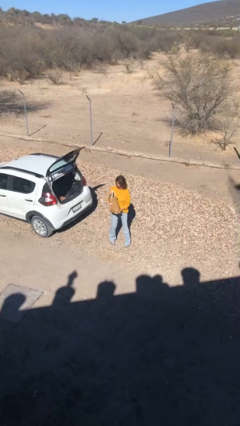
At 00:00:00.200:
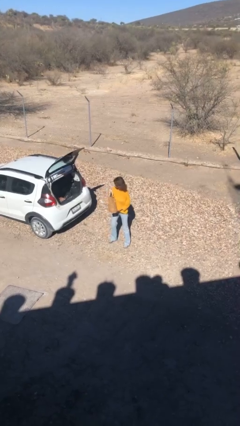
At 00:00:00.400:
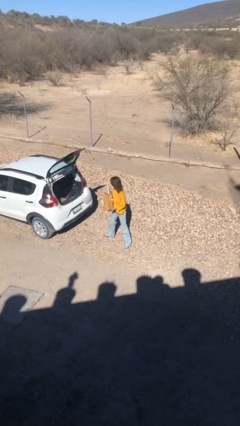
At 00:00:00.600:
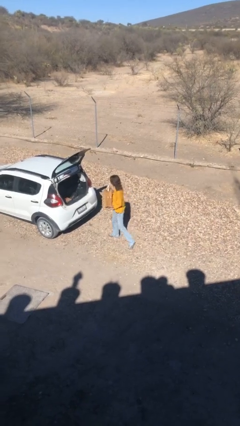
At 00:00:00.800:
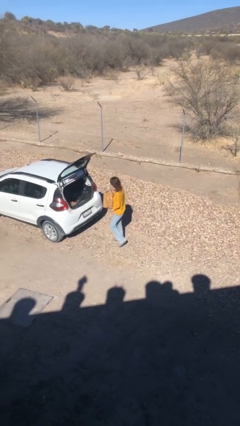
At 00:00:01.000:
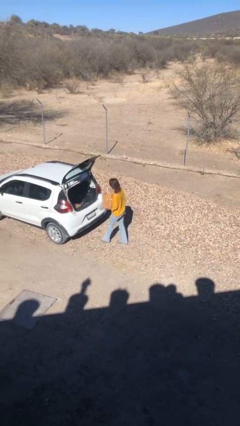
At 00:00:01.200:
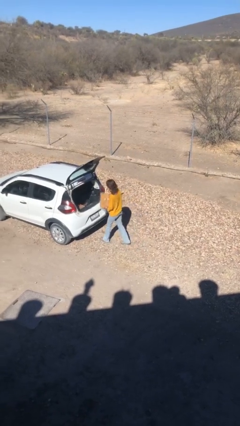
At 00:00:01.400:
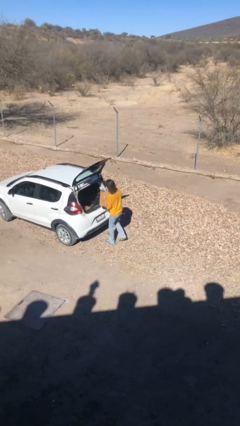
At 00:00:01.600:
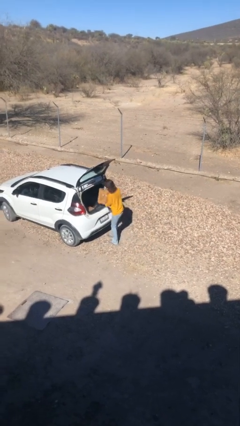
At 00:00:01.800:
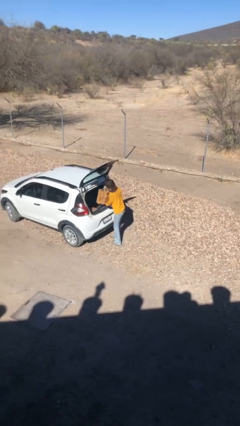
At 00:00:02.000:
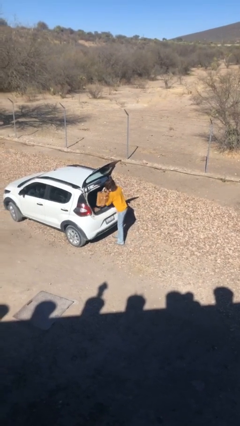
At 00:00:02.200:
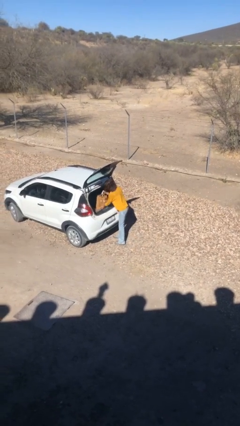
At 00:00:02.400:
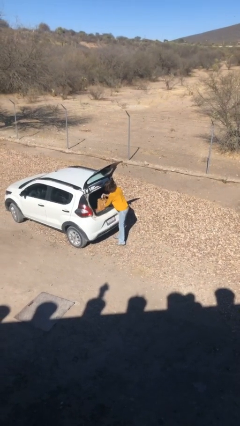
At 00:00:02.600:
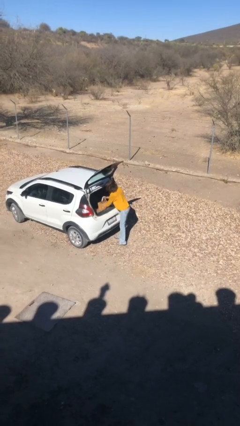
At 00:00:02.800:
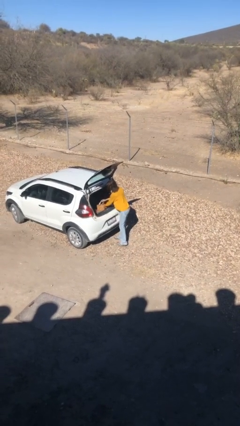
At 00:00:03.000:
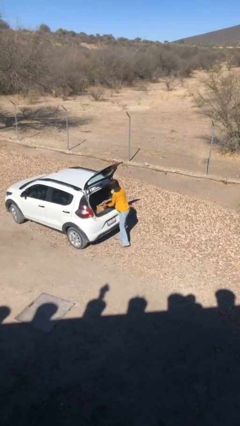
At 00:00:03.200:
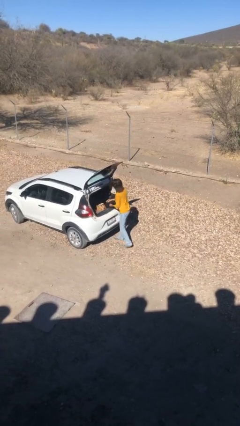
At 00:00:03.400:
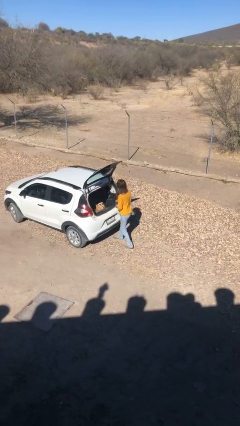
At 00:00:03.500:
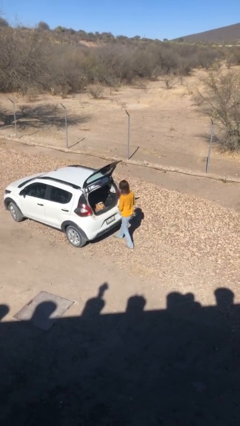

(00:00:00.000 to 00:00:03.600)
person loads car

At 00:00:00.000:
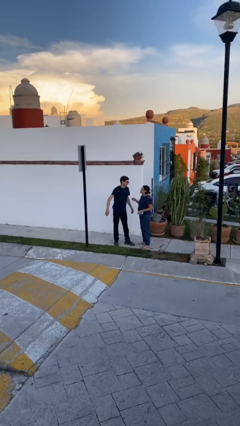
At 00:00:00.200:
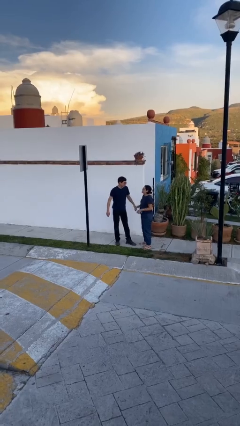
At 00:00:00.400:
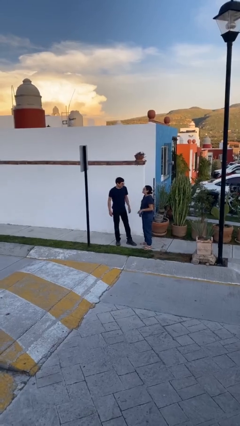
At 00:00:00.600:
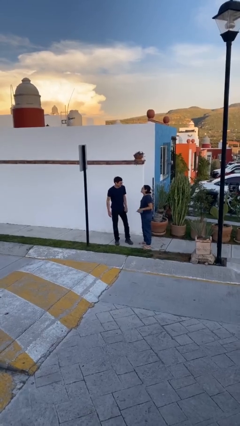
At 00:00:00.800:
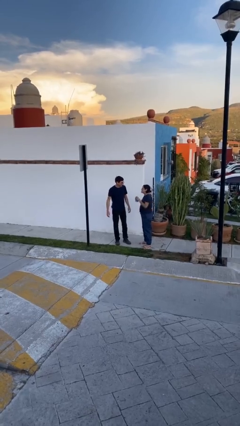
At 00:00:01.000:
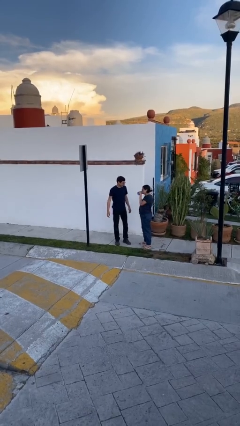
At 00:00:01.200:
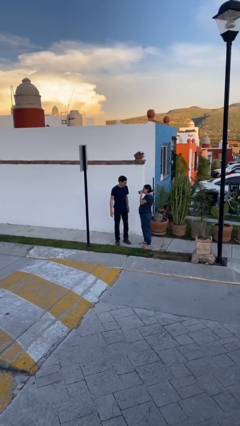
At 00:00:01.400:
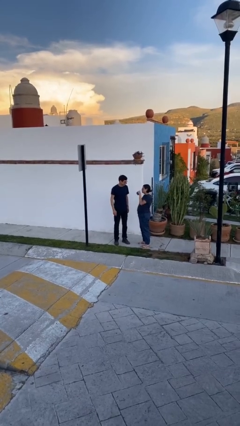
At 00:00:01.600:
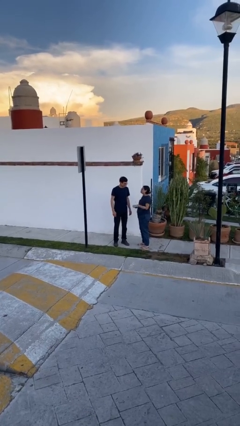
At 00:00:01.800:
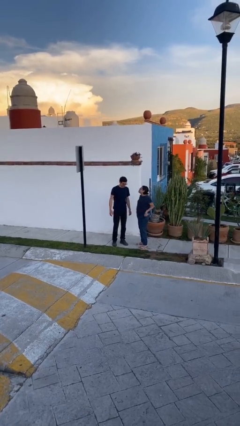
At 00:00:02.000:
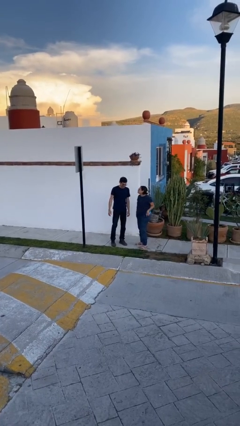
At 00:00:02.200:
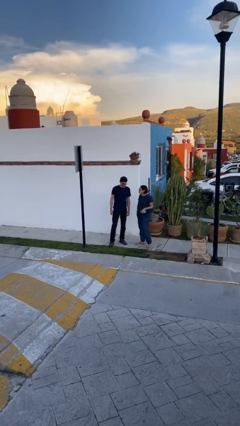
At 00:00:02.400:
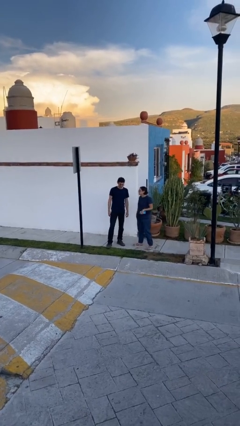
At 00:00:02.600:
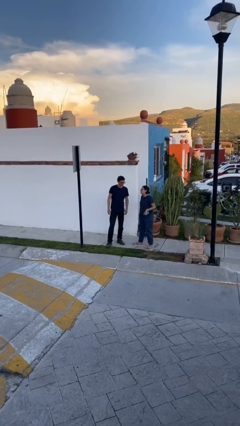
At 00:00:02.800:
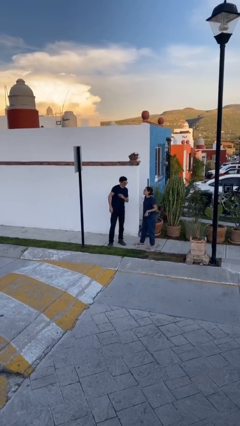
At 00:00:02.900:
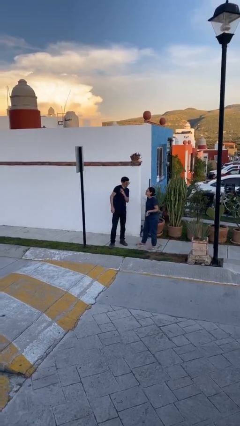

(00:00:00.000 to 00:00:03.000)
person talks to person

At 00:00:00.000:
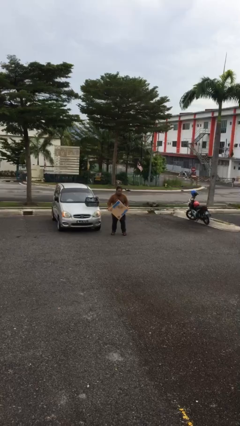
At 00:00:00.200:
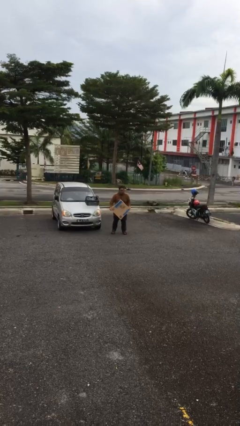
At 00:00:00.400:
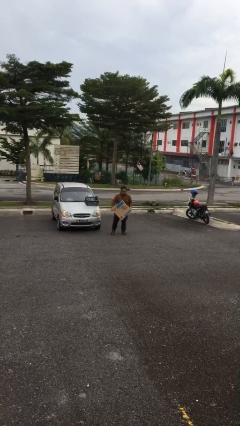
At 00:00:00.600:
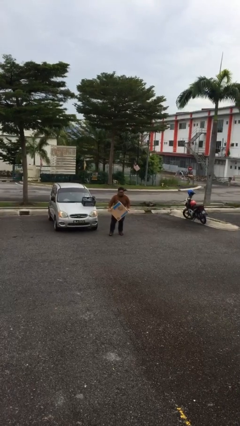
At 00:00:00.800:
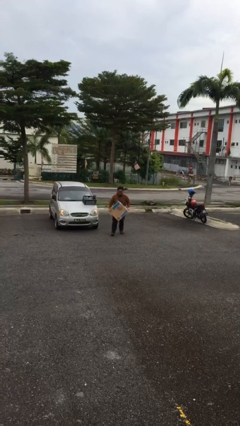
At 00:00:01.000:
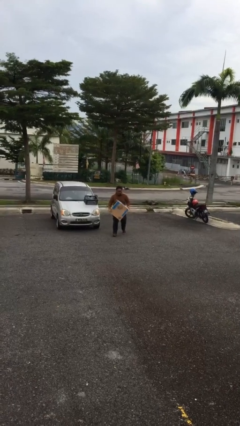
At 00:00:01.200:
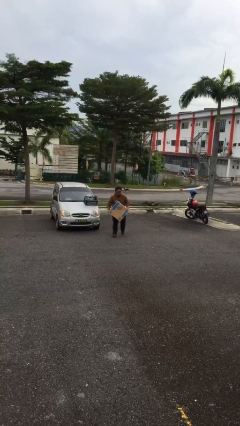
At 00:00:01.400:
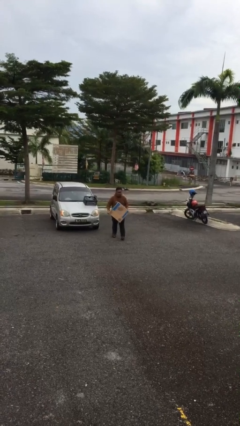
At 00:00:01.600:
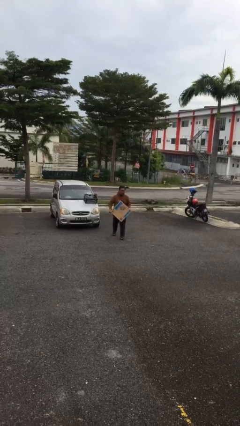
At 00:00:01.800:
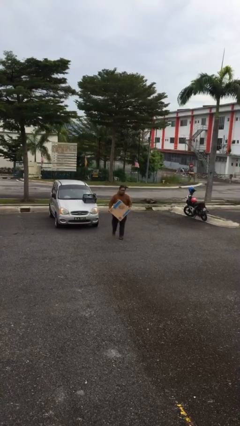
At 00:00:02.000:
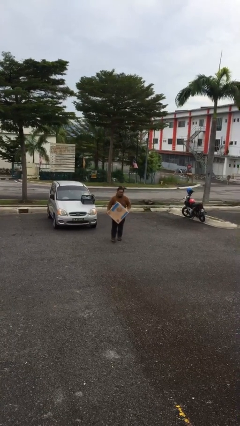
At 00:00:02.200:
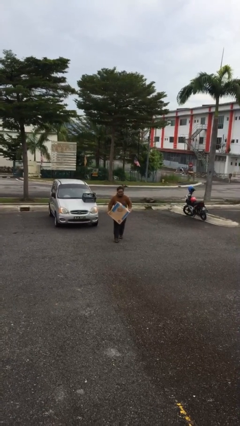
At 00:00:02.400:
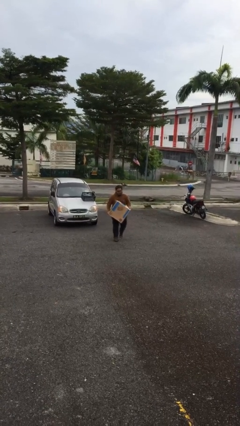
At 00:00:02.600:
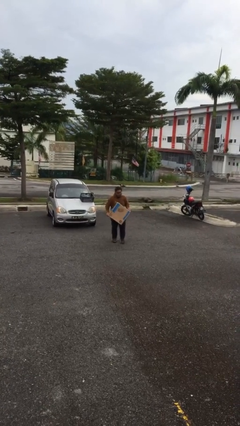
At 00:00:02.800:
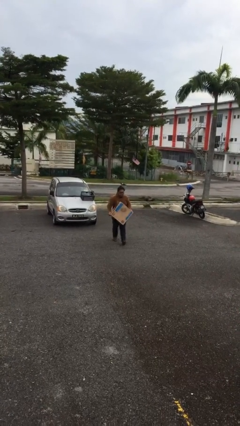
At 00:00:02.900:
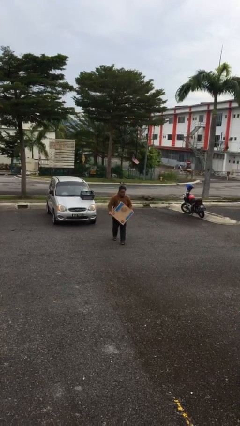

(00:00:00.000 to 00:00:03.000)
person carries heavy object

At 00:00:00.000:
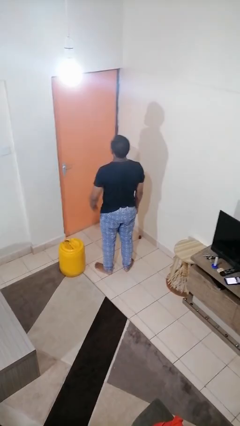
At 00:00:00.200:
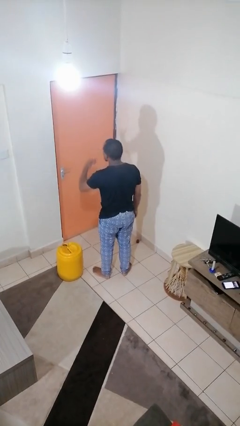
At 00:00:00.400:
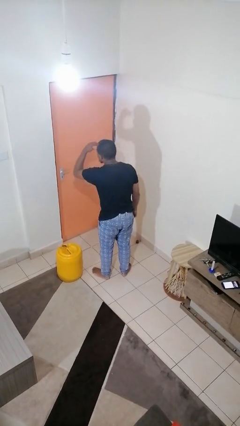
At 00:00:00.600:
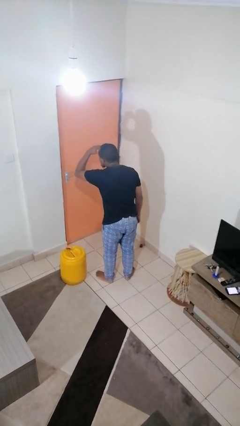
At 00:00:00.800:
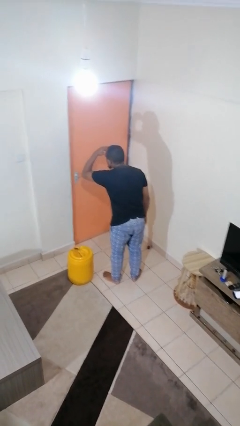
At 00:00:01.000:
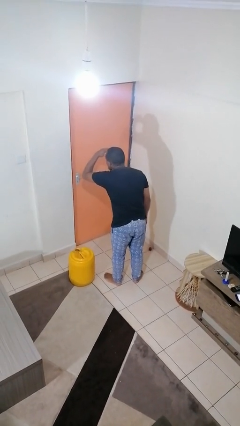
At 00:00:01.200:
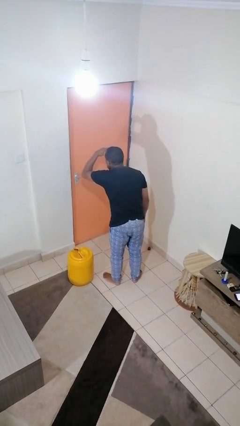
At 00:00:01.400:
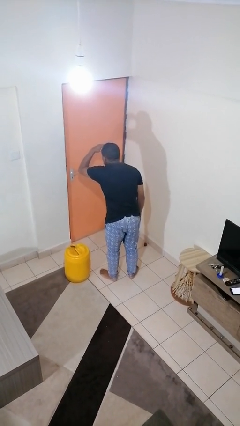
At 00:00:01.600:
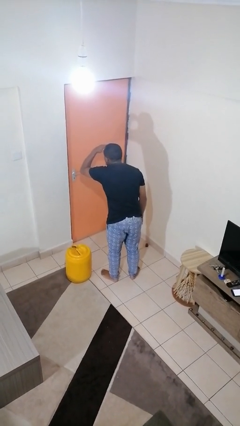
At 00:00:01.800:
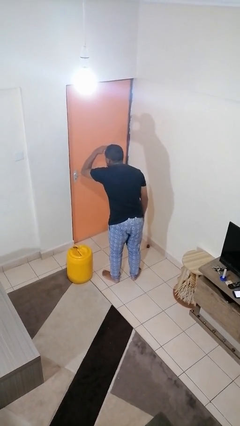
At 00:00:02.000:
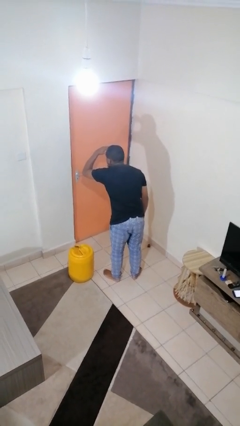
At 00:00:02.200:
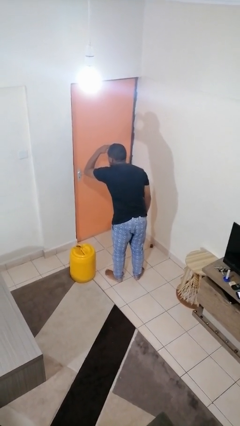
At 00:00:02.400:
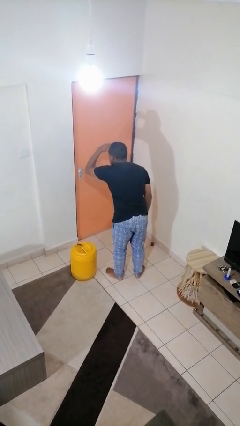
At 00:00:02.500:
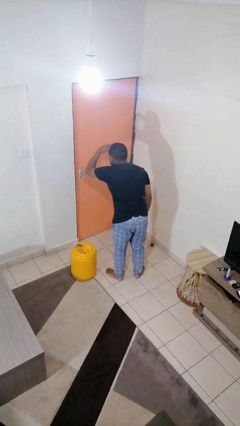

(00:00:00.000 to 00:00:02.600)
person shades eyes

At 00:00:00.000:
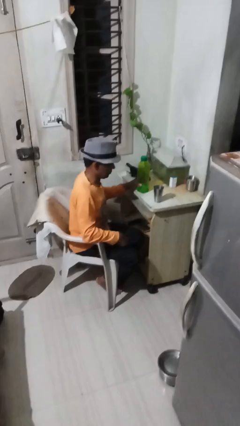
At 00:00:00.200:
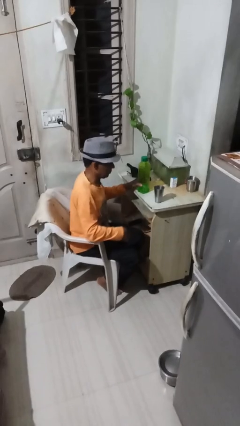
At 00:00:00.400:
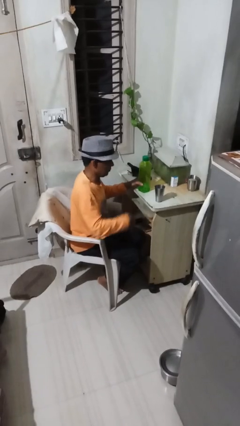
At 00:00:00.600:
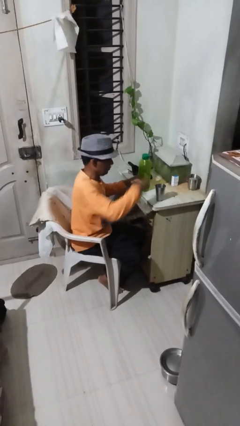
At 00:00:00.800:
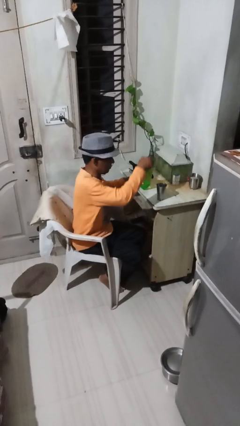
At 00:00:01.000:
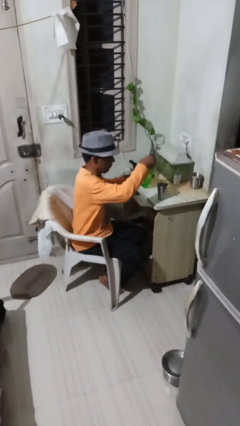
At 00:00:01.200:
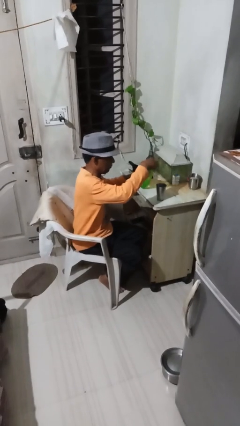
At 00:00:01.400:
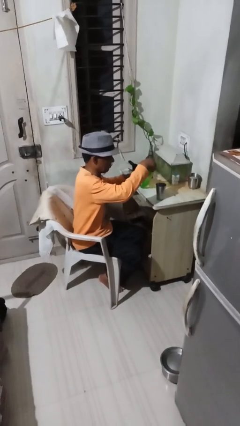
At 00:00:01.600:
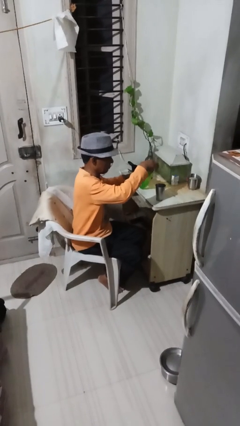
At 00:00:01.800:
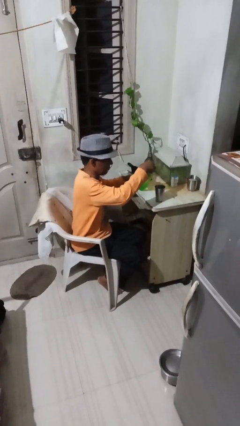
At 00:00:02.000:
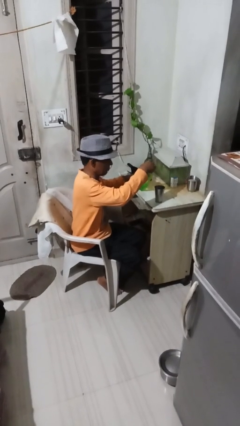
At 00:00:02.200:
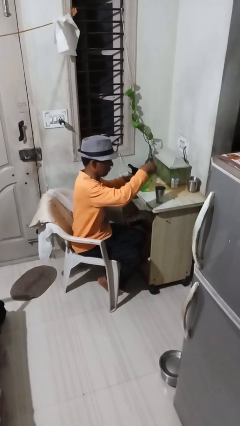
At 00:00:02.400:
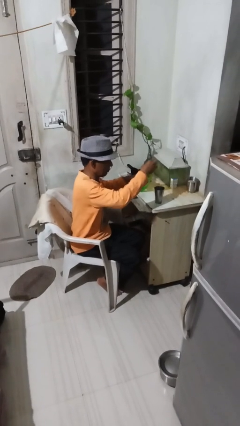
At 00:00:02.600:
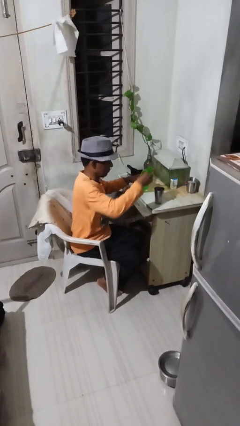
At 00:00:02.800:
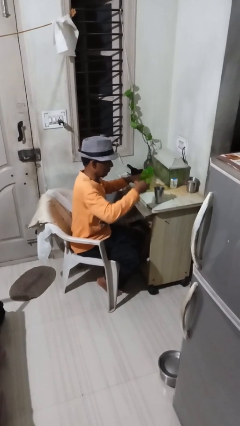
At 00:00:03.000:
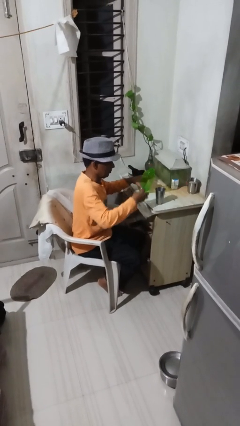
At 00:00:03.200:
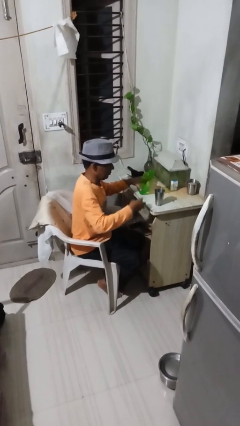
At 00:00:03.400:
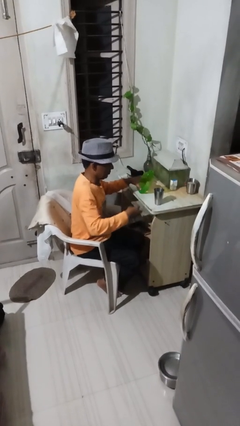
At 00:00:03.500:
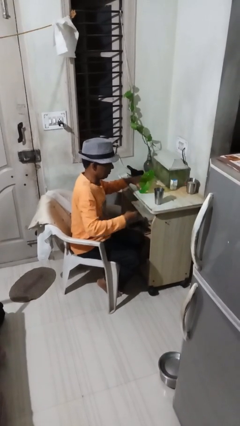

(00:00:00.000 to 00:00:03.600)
person unscrews lid from bottle

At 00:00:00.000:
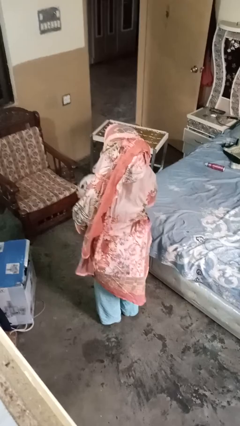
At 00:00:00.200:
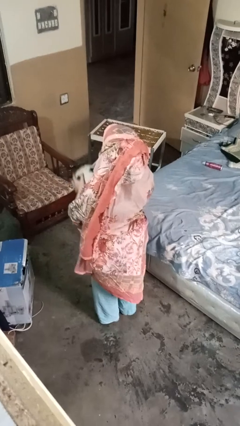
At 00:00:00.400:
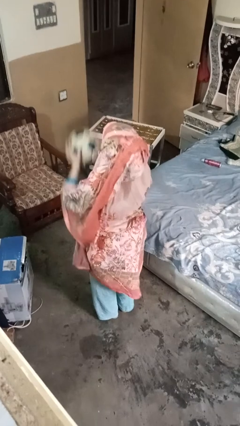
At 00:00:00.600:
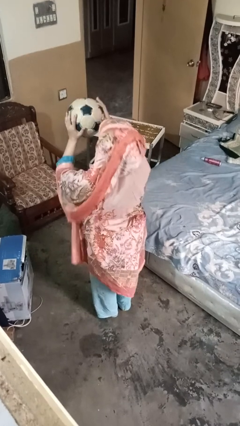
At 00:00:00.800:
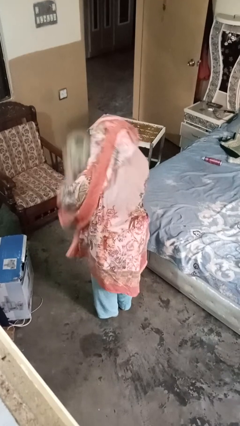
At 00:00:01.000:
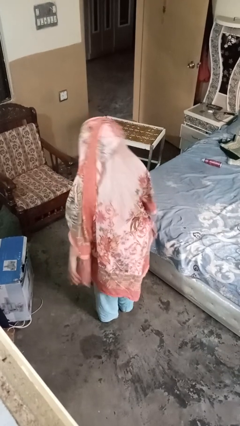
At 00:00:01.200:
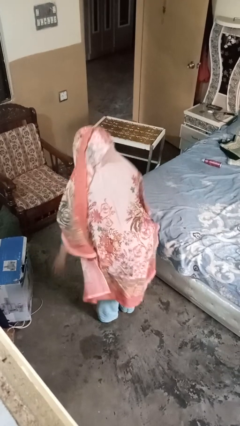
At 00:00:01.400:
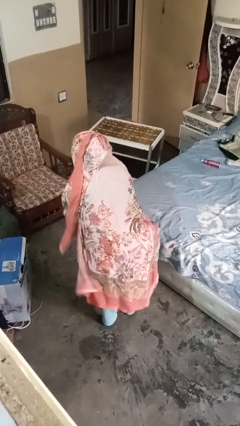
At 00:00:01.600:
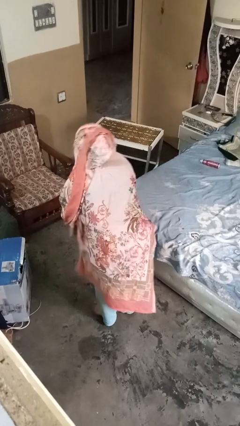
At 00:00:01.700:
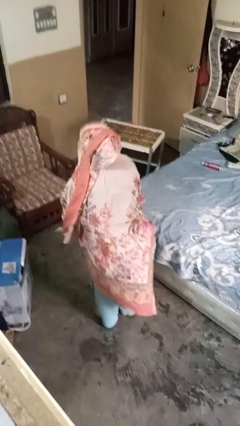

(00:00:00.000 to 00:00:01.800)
person bounces ball on floor
